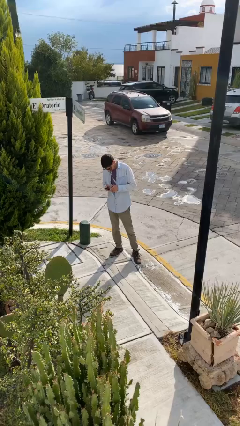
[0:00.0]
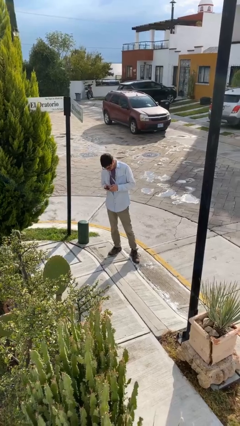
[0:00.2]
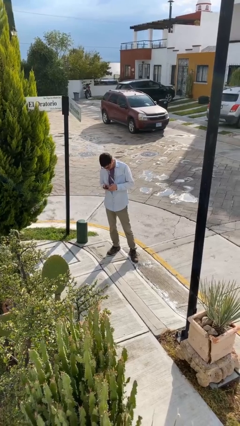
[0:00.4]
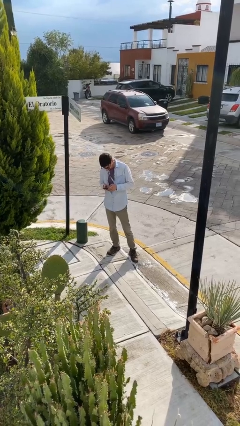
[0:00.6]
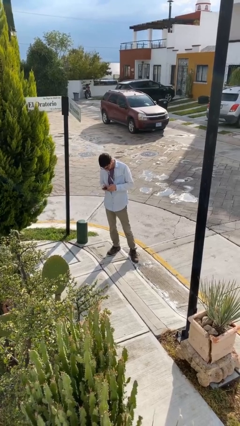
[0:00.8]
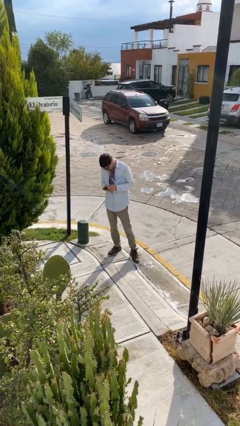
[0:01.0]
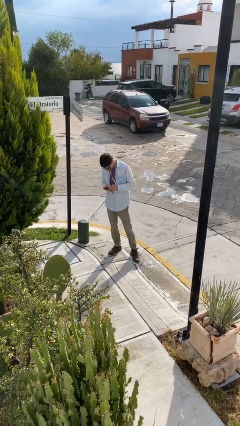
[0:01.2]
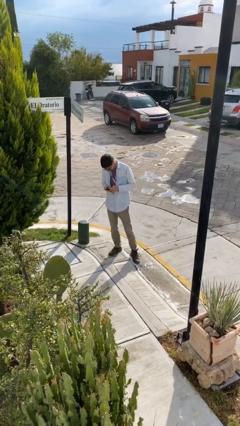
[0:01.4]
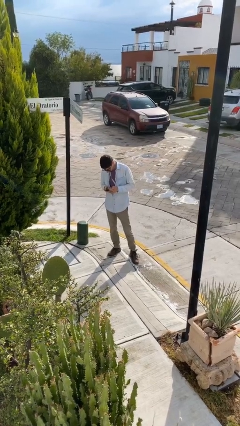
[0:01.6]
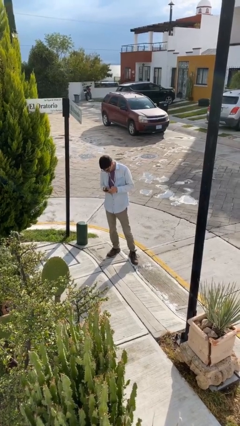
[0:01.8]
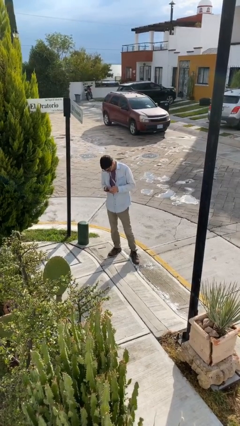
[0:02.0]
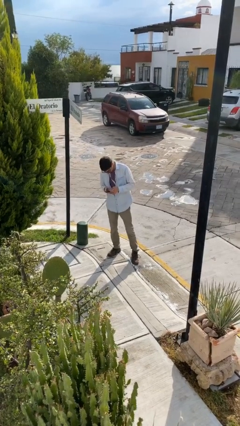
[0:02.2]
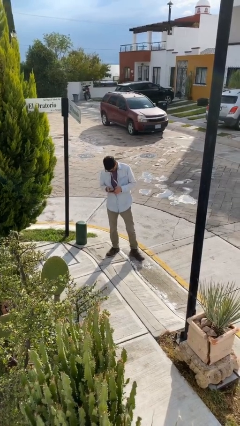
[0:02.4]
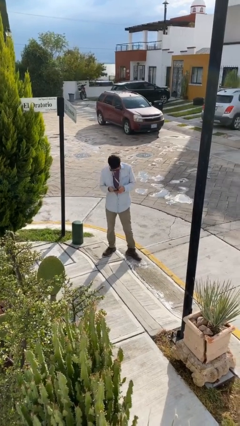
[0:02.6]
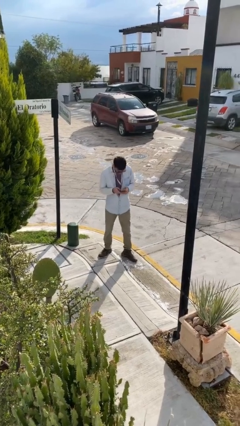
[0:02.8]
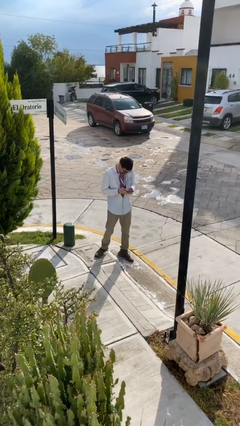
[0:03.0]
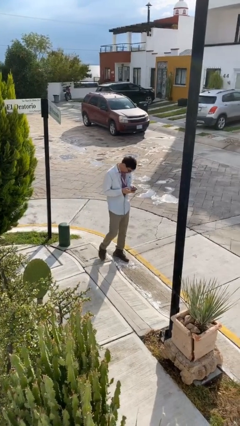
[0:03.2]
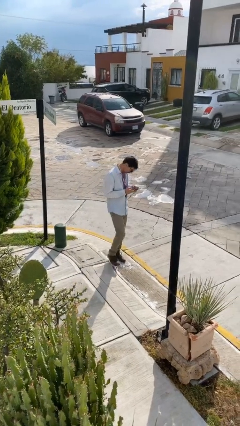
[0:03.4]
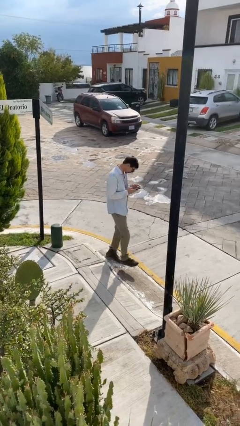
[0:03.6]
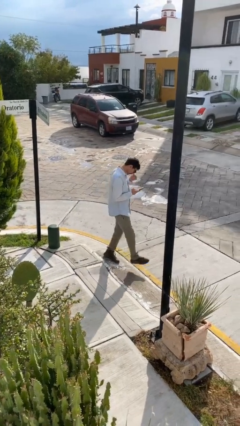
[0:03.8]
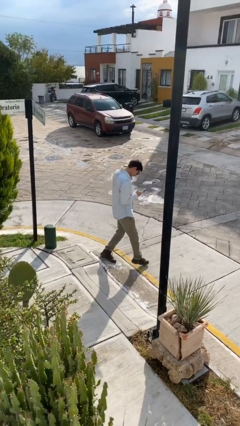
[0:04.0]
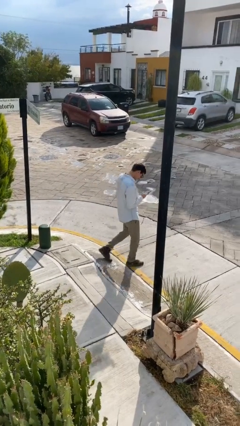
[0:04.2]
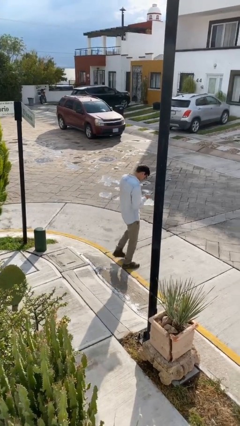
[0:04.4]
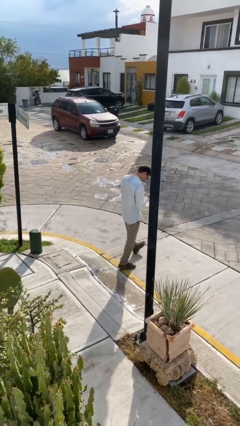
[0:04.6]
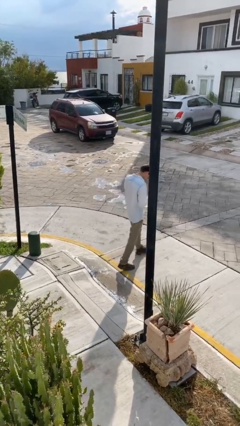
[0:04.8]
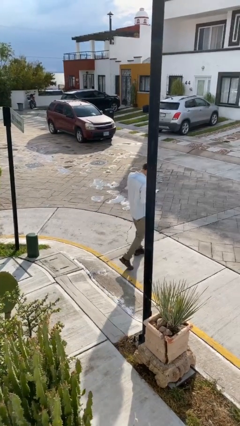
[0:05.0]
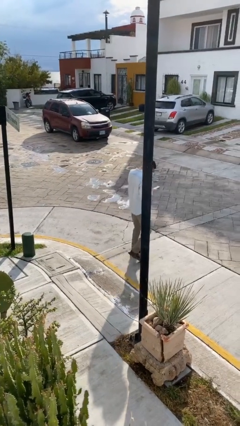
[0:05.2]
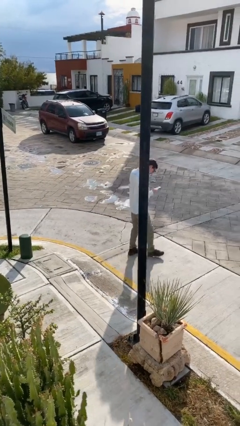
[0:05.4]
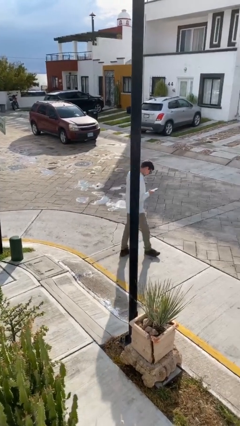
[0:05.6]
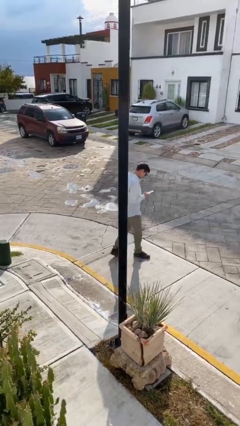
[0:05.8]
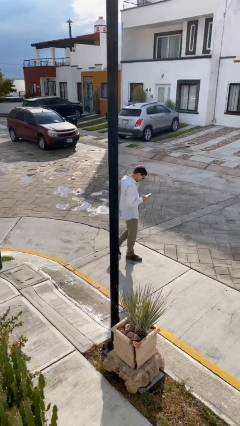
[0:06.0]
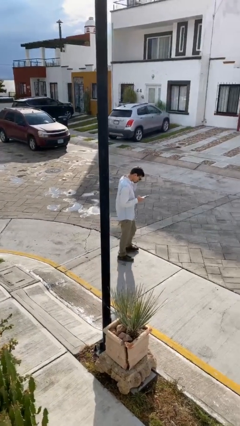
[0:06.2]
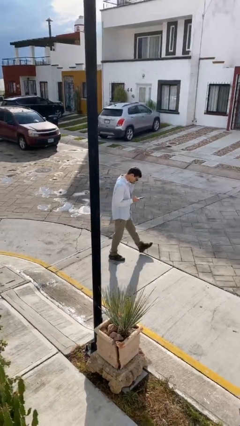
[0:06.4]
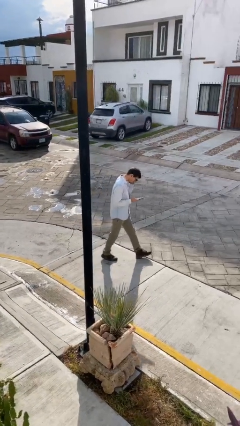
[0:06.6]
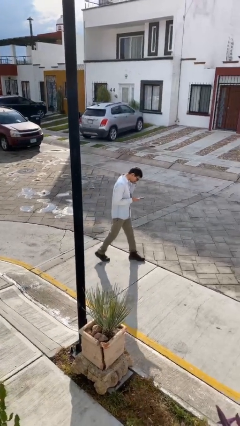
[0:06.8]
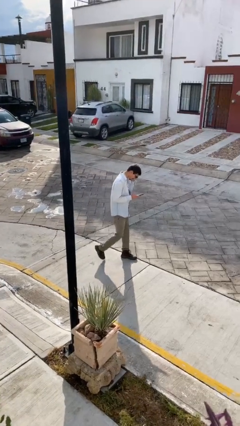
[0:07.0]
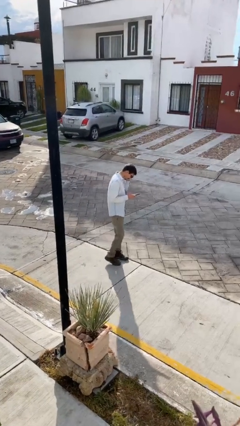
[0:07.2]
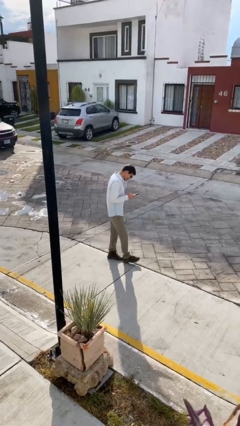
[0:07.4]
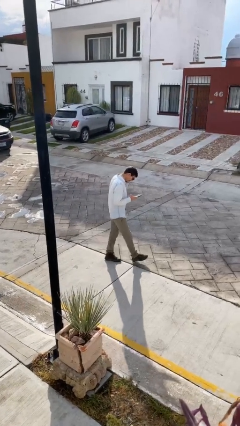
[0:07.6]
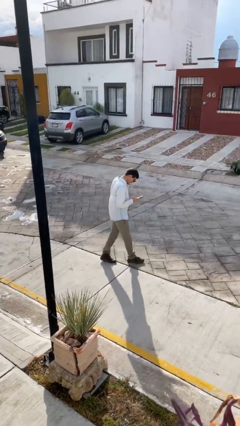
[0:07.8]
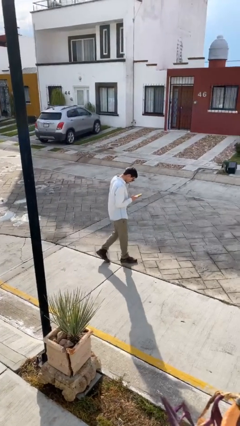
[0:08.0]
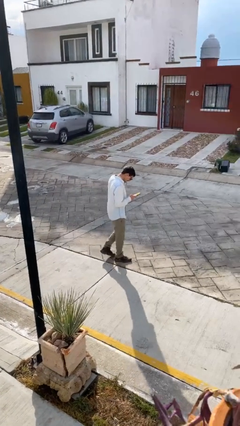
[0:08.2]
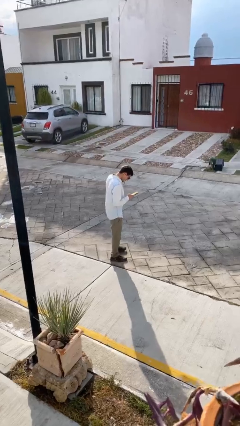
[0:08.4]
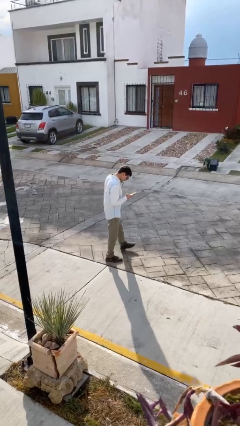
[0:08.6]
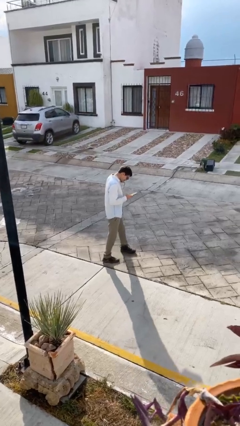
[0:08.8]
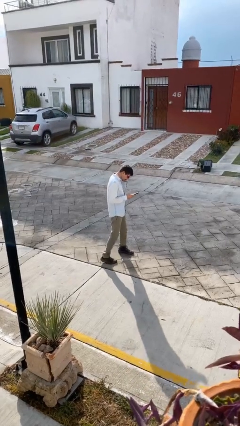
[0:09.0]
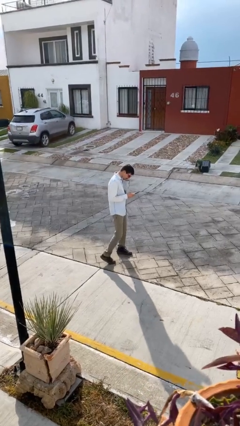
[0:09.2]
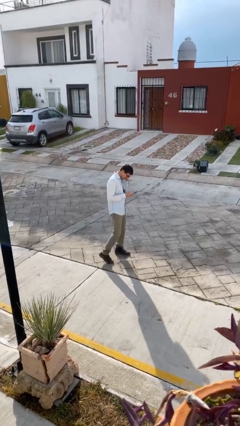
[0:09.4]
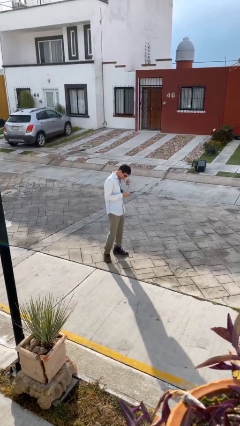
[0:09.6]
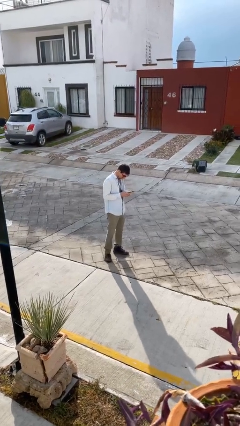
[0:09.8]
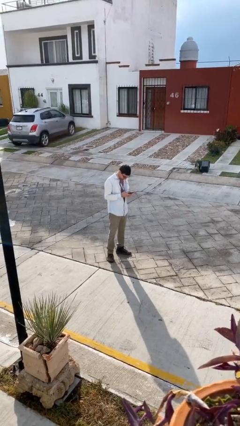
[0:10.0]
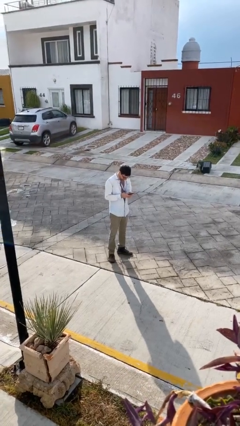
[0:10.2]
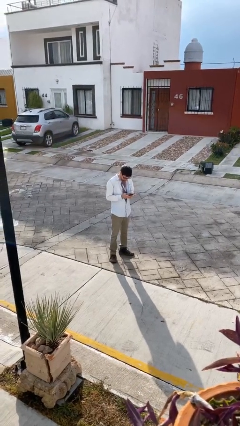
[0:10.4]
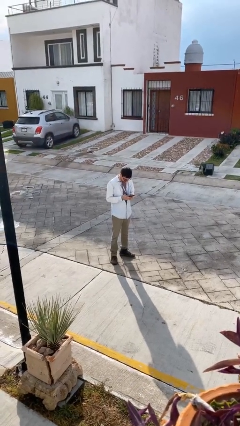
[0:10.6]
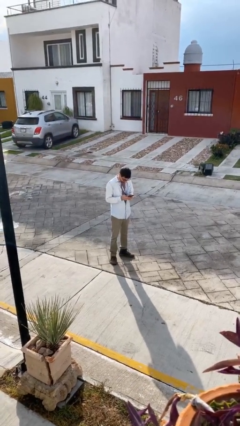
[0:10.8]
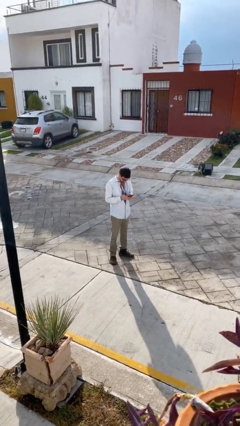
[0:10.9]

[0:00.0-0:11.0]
person texts on phone

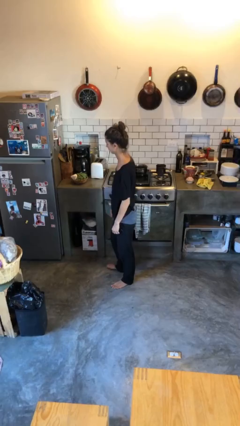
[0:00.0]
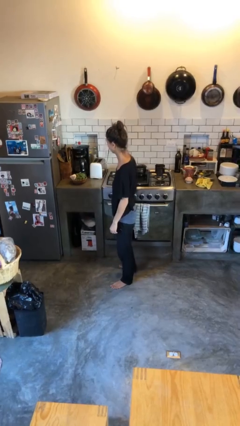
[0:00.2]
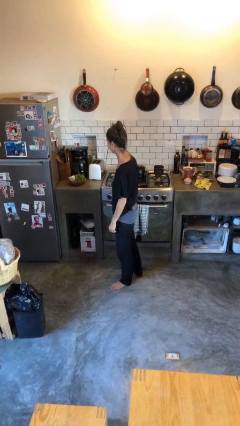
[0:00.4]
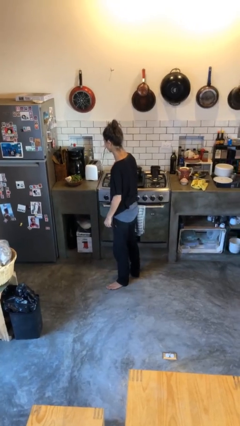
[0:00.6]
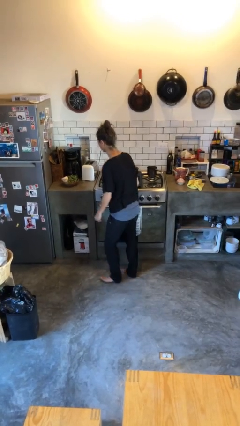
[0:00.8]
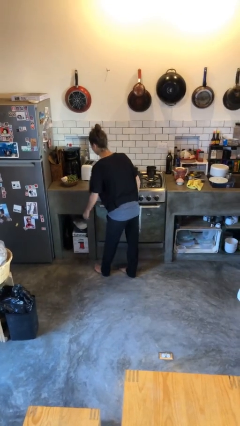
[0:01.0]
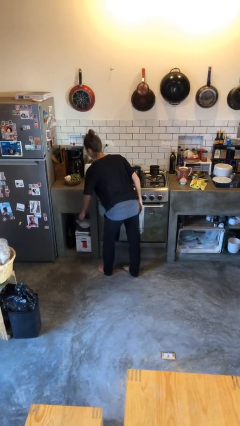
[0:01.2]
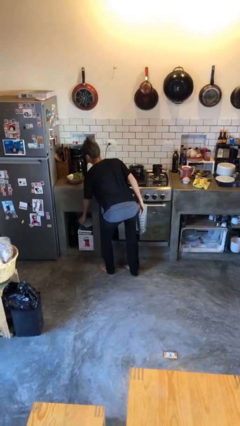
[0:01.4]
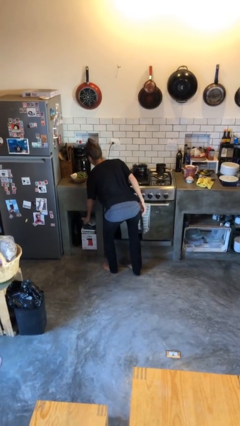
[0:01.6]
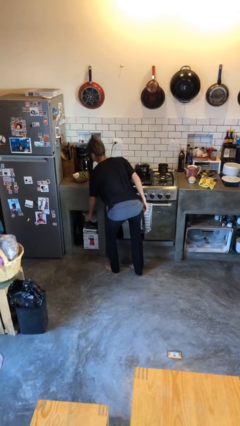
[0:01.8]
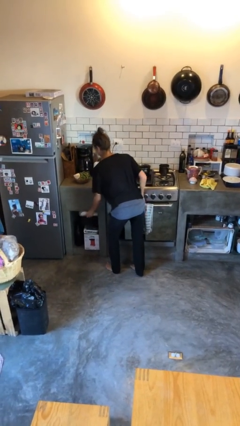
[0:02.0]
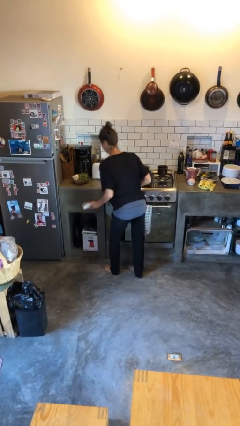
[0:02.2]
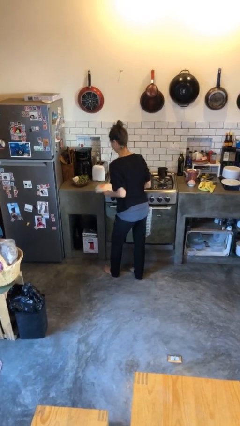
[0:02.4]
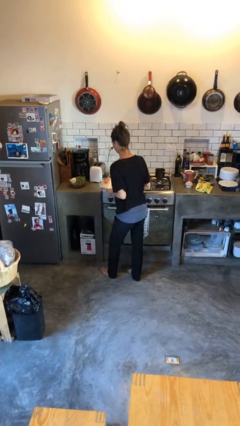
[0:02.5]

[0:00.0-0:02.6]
person picks up object from cabinet

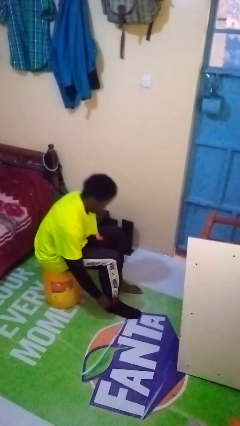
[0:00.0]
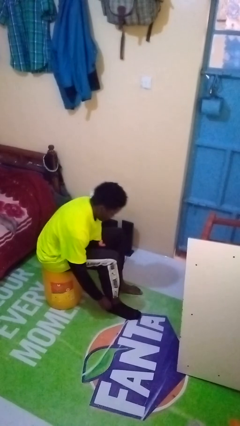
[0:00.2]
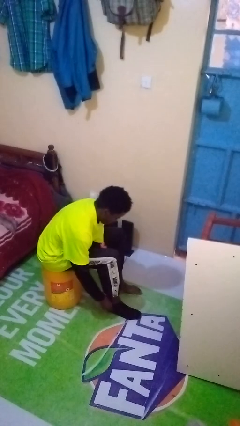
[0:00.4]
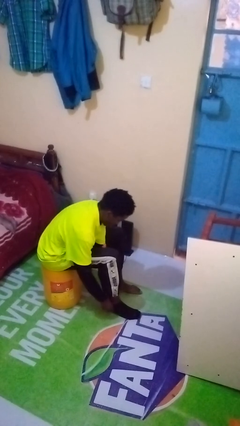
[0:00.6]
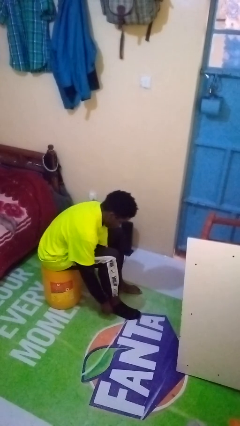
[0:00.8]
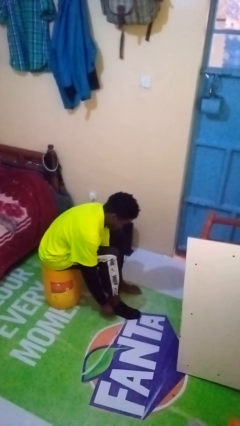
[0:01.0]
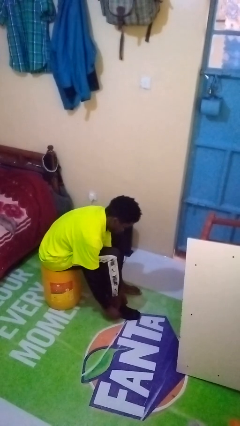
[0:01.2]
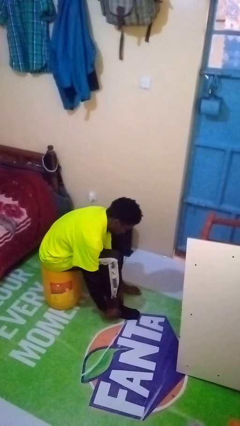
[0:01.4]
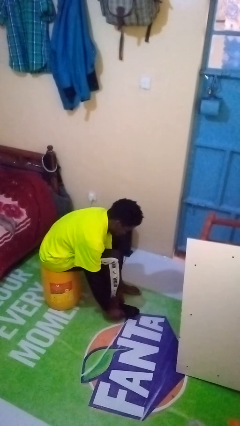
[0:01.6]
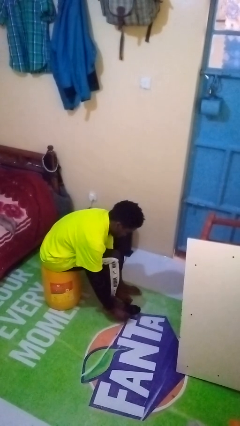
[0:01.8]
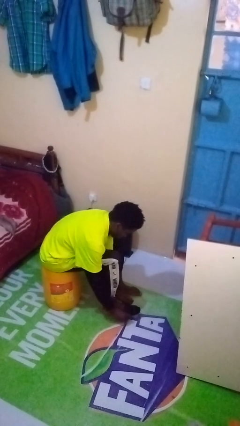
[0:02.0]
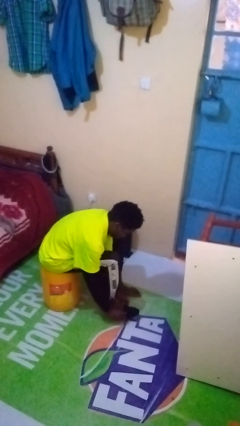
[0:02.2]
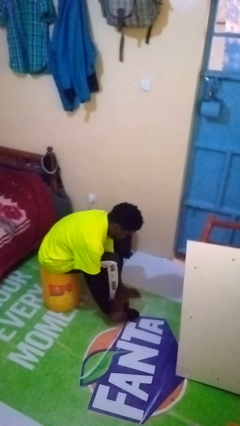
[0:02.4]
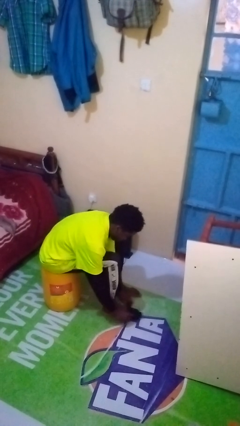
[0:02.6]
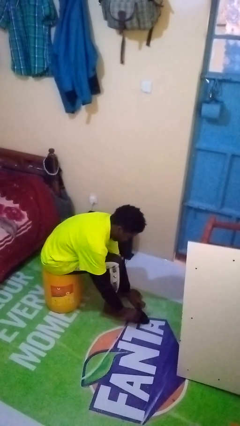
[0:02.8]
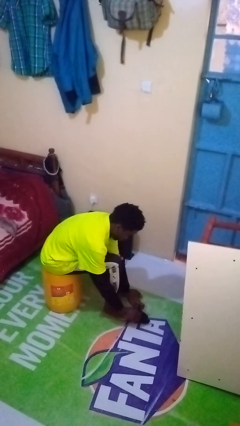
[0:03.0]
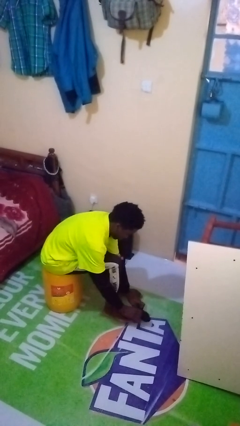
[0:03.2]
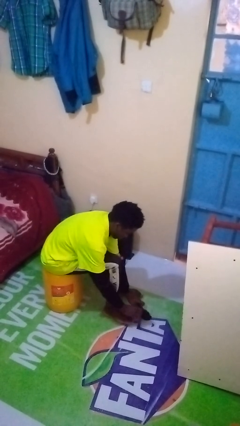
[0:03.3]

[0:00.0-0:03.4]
person takes off socks

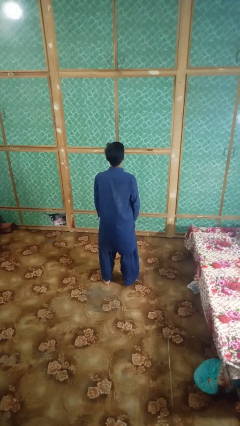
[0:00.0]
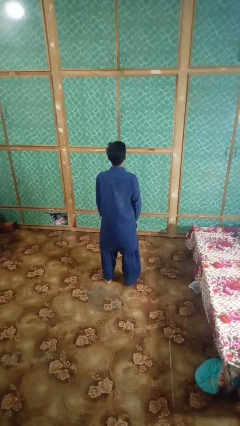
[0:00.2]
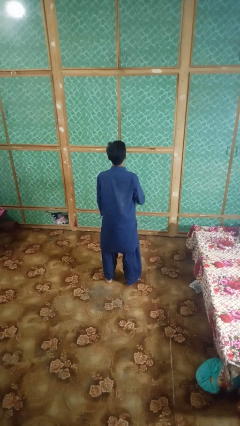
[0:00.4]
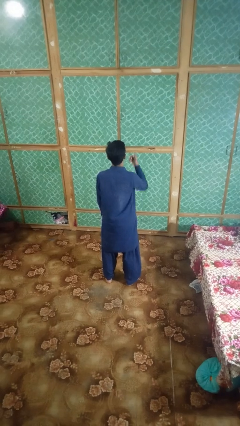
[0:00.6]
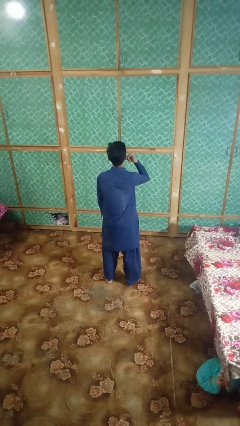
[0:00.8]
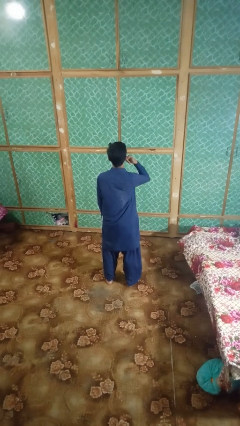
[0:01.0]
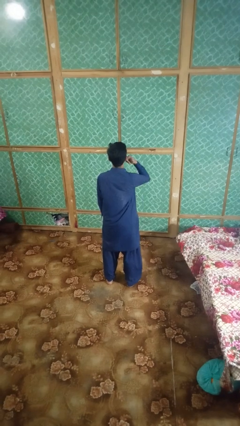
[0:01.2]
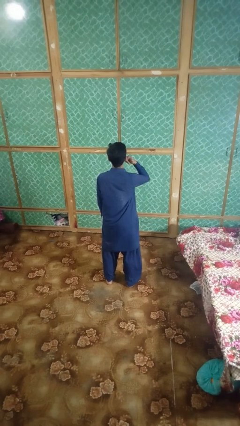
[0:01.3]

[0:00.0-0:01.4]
person gestures call me
